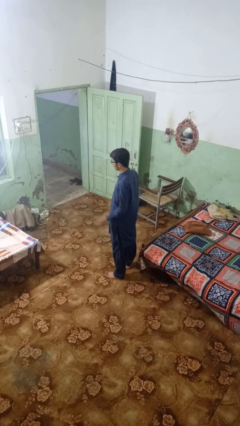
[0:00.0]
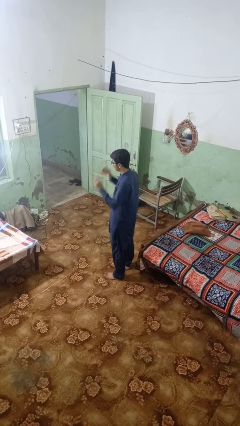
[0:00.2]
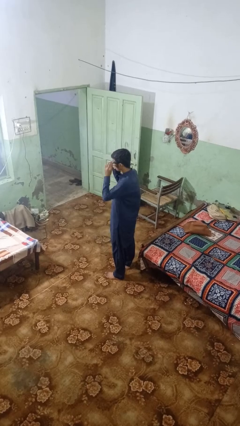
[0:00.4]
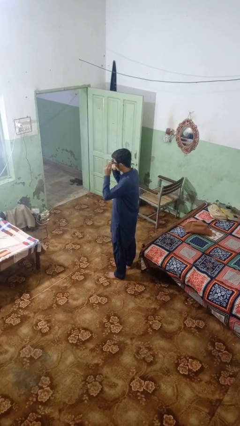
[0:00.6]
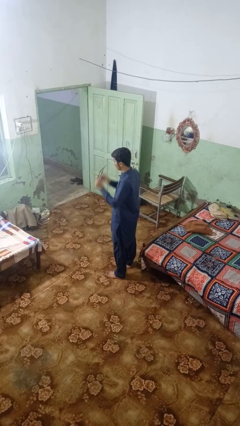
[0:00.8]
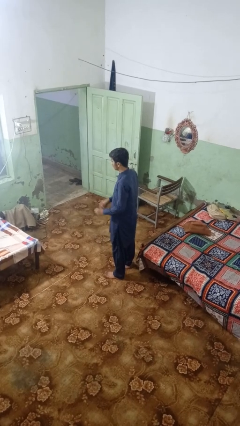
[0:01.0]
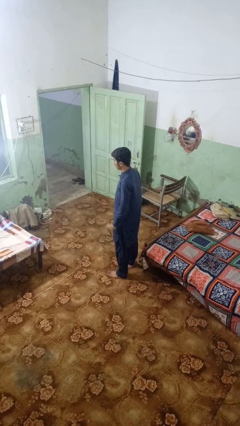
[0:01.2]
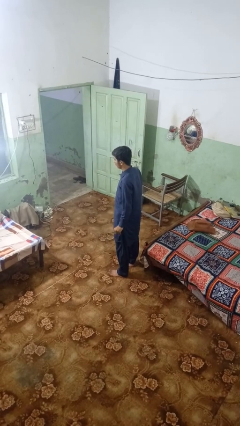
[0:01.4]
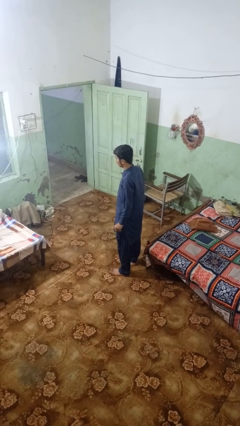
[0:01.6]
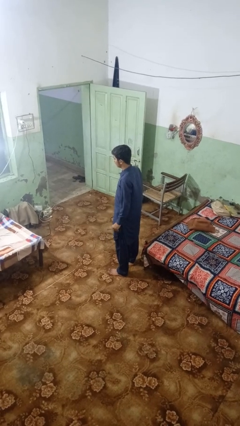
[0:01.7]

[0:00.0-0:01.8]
person takes off glasses

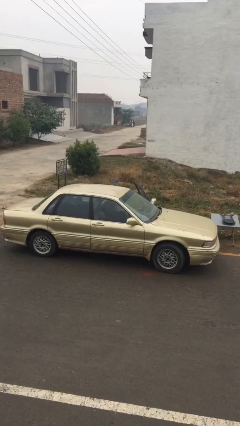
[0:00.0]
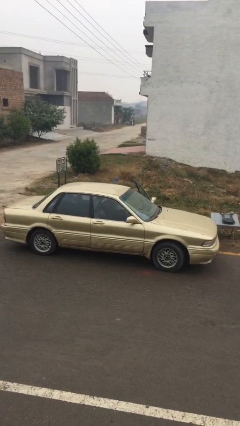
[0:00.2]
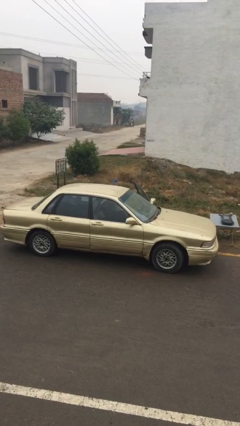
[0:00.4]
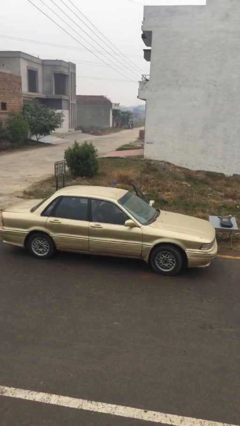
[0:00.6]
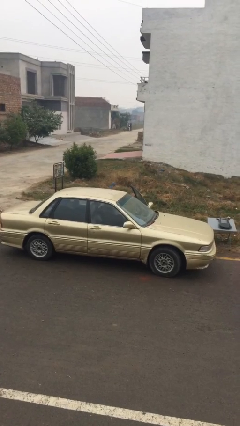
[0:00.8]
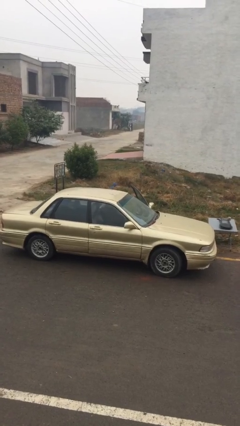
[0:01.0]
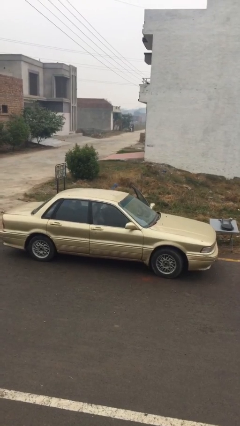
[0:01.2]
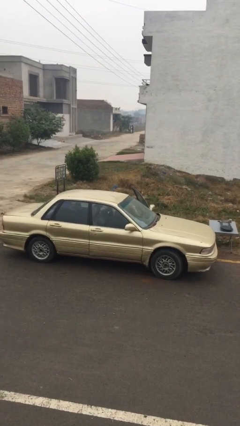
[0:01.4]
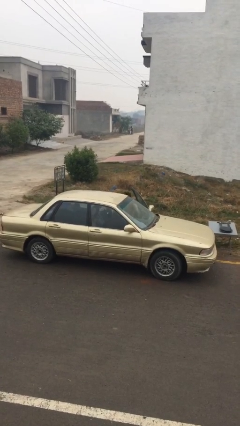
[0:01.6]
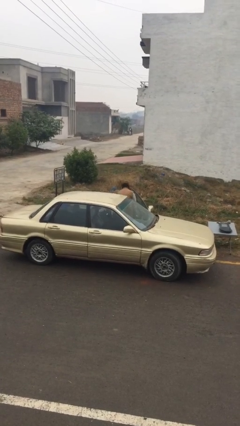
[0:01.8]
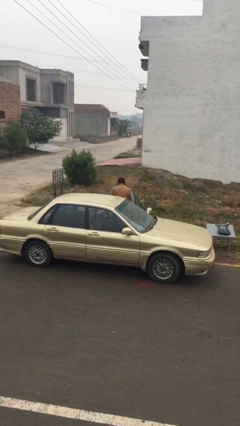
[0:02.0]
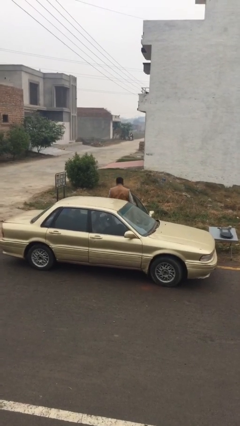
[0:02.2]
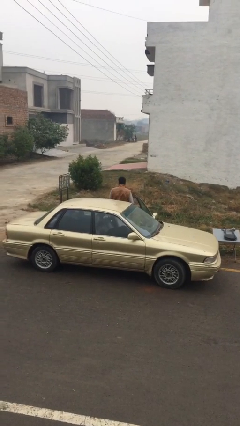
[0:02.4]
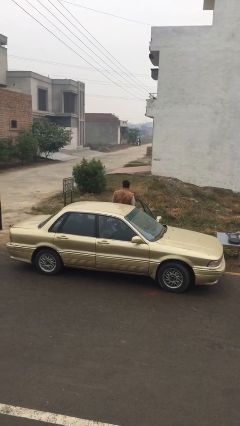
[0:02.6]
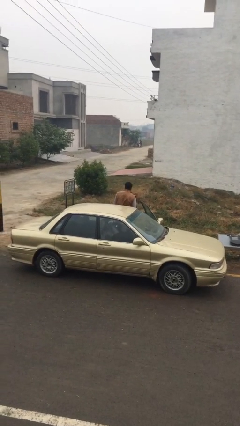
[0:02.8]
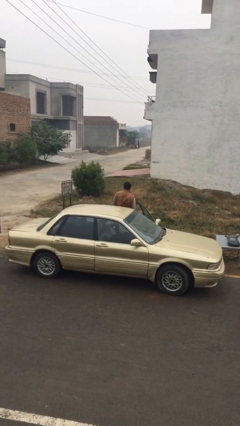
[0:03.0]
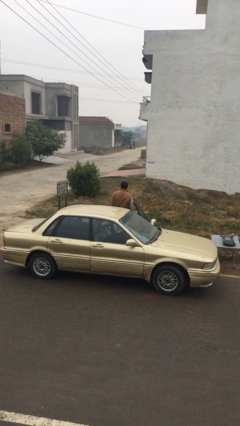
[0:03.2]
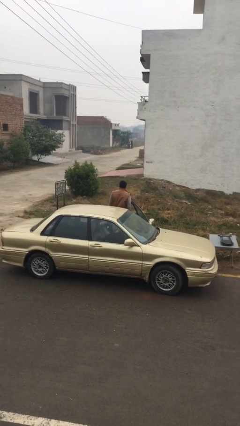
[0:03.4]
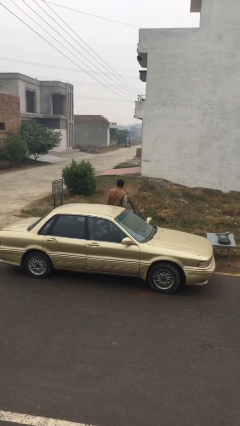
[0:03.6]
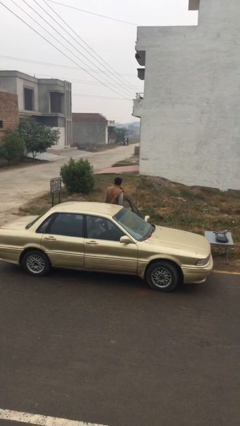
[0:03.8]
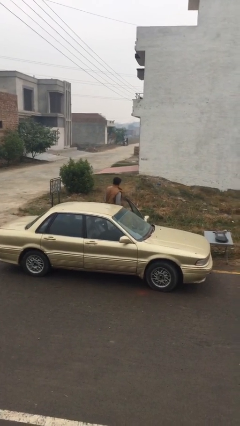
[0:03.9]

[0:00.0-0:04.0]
person exits car

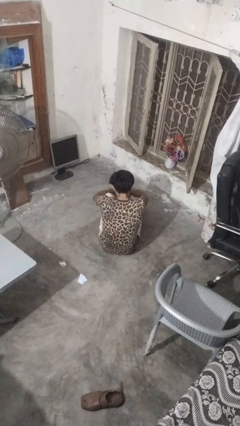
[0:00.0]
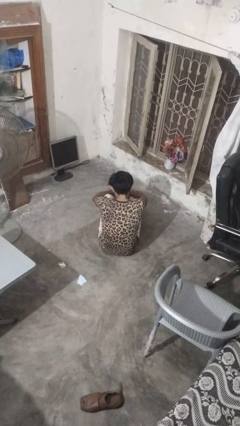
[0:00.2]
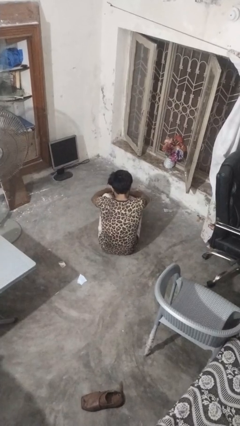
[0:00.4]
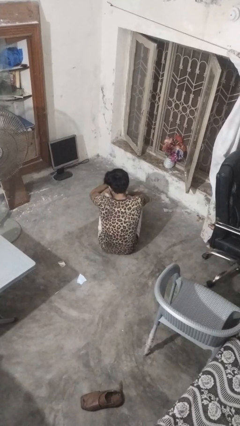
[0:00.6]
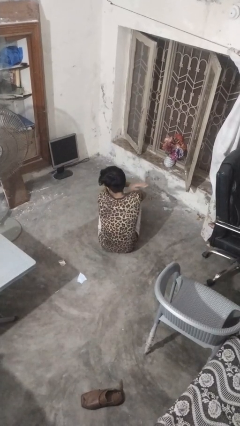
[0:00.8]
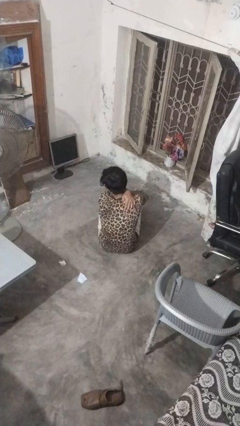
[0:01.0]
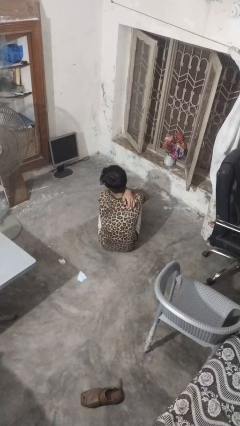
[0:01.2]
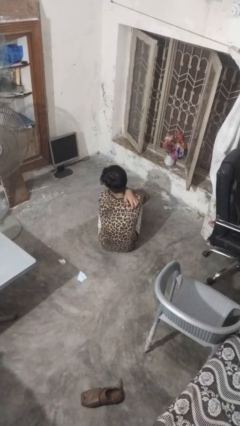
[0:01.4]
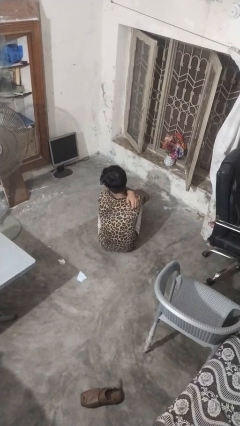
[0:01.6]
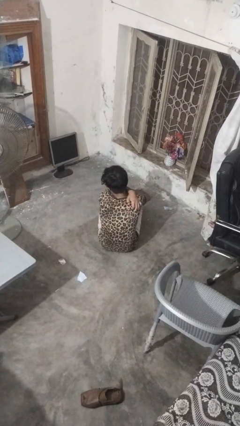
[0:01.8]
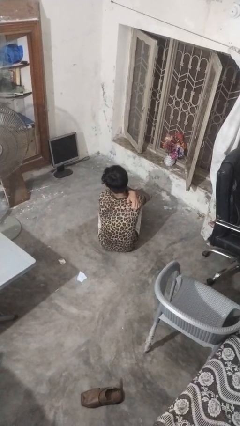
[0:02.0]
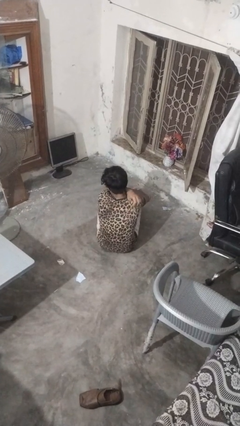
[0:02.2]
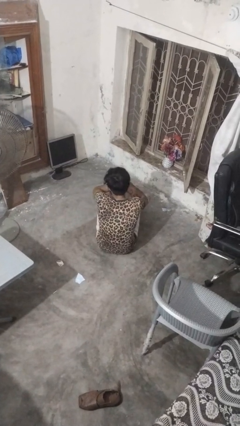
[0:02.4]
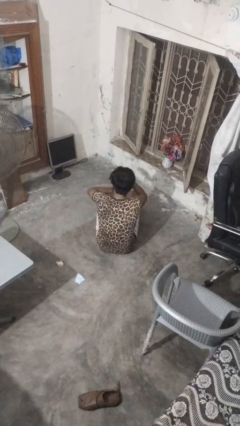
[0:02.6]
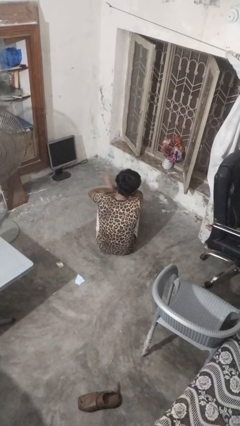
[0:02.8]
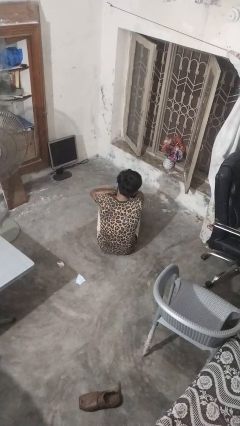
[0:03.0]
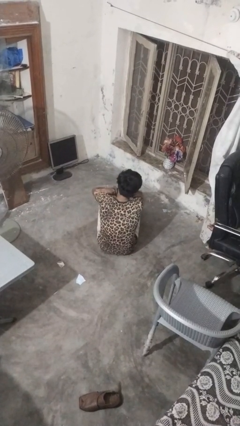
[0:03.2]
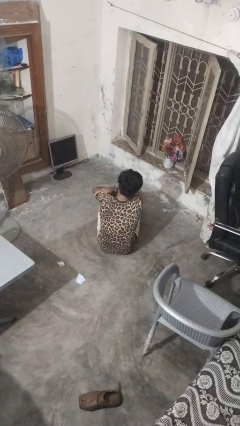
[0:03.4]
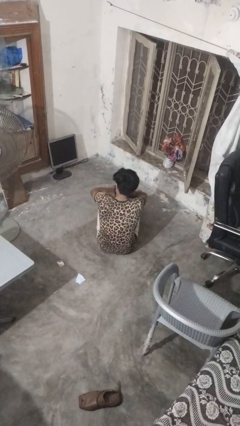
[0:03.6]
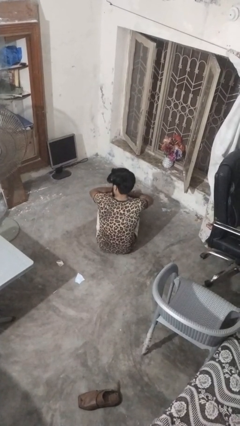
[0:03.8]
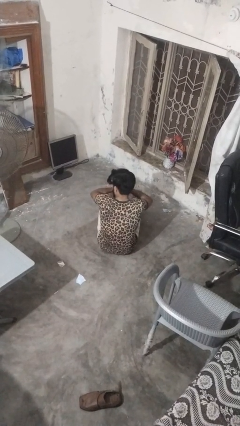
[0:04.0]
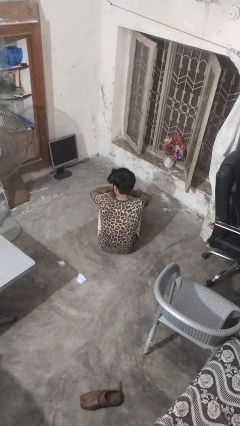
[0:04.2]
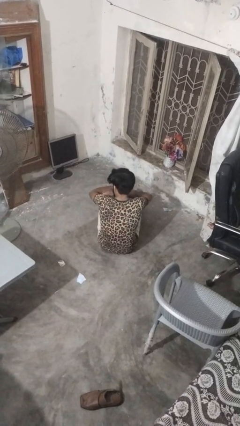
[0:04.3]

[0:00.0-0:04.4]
person swats bug

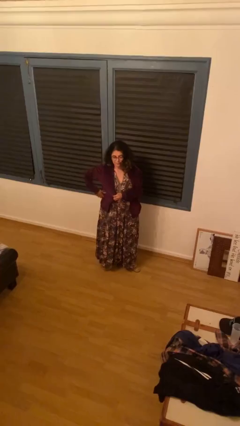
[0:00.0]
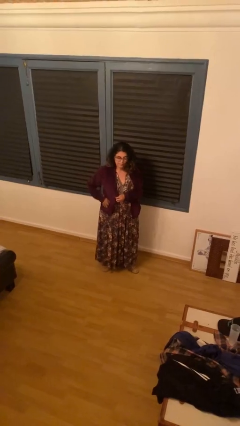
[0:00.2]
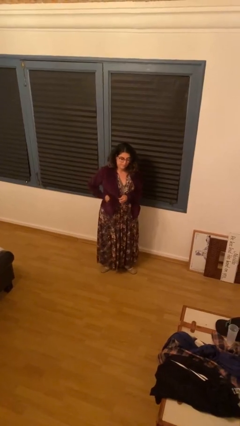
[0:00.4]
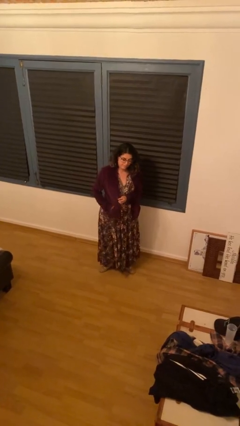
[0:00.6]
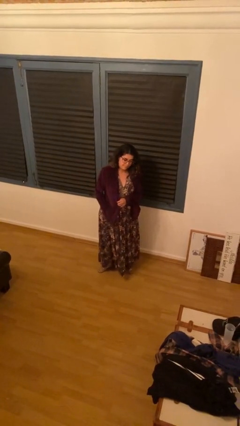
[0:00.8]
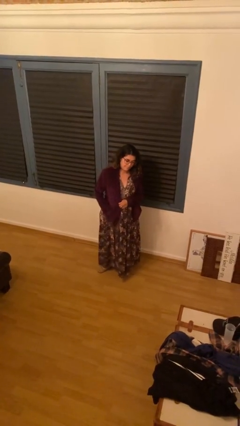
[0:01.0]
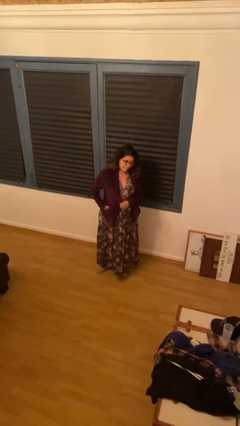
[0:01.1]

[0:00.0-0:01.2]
person puts phone into pocket

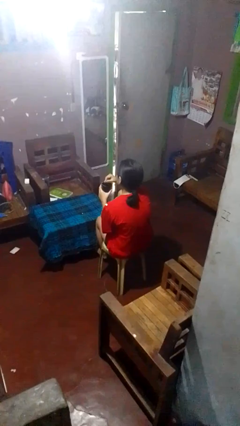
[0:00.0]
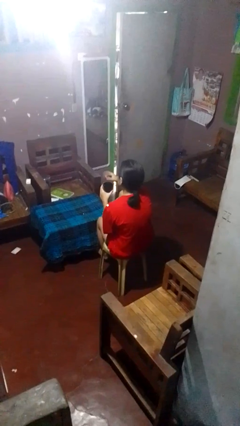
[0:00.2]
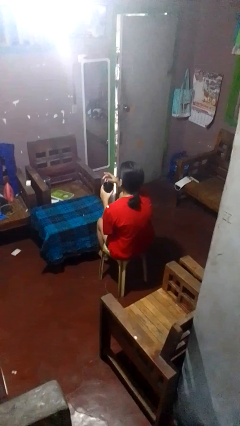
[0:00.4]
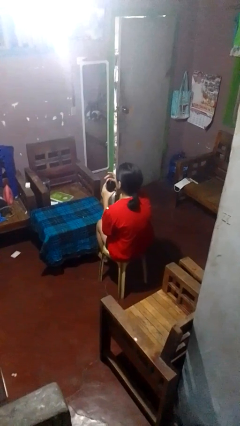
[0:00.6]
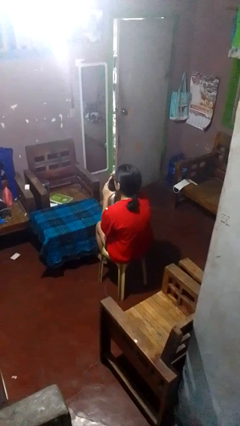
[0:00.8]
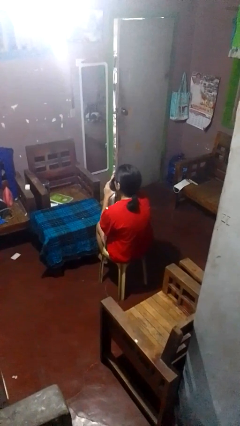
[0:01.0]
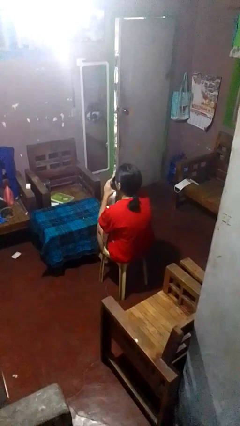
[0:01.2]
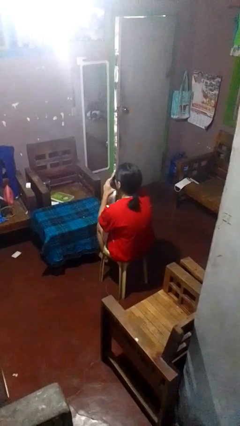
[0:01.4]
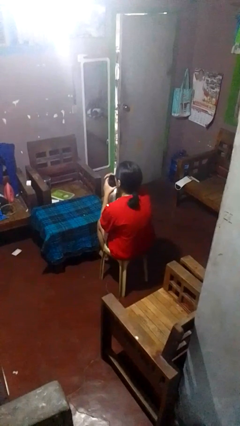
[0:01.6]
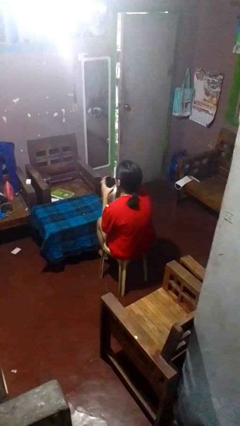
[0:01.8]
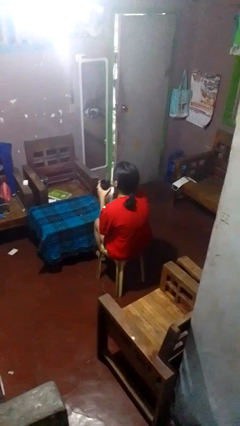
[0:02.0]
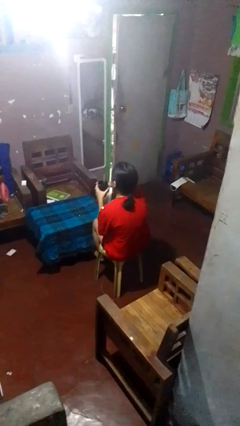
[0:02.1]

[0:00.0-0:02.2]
person drinks from mug

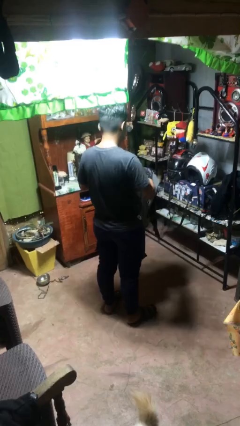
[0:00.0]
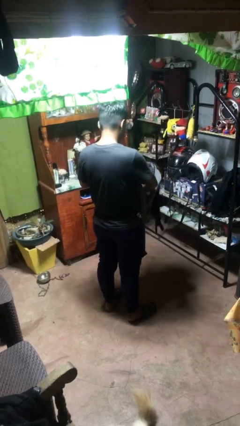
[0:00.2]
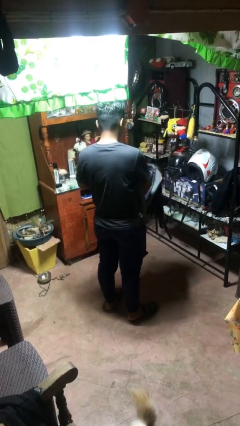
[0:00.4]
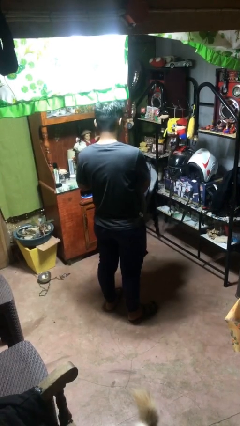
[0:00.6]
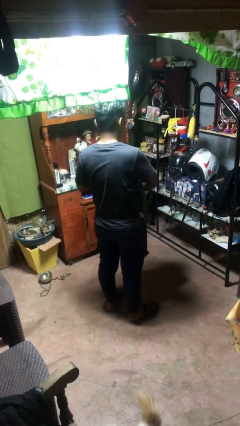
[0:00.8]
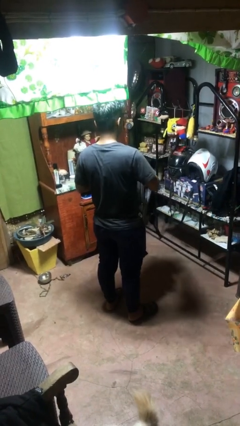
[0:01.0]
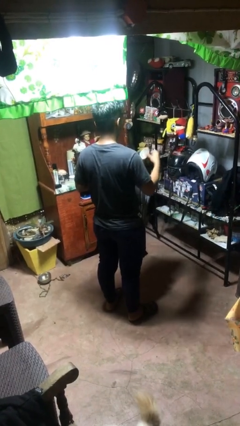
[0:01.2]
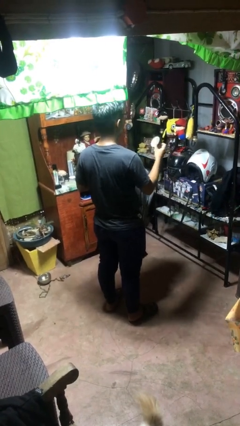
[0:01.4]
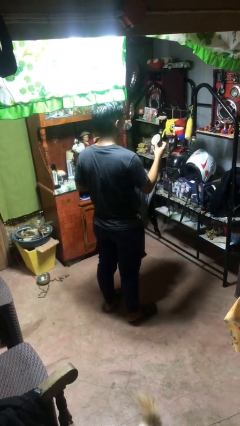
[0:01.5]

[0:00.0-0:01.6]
person takes object from bag

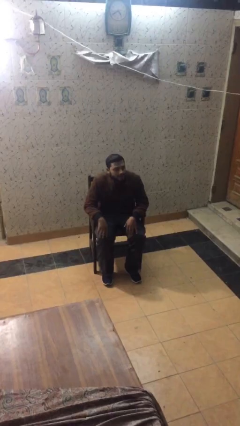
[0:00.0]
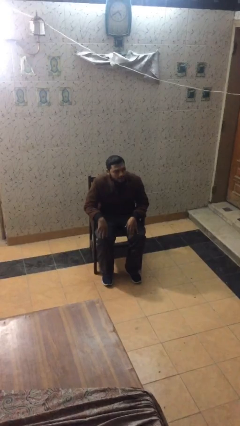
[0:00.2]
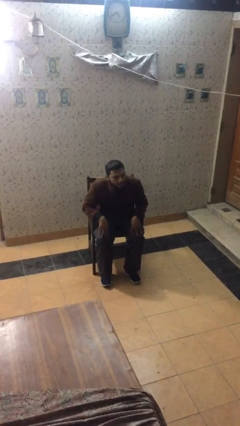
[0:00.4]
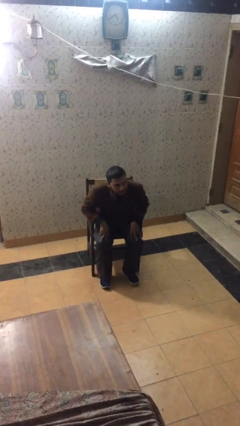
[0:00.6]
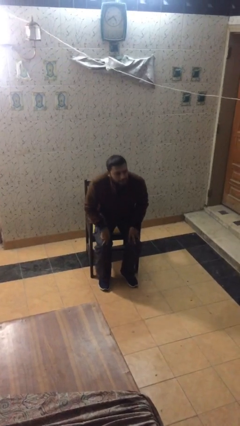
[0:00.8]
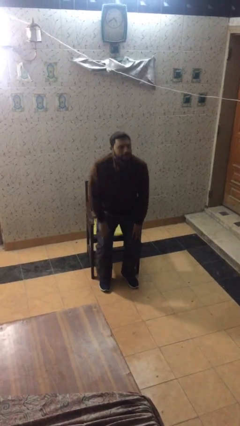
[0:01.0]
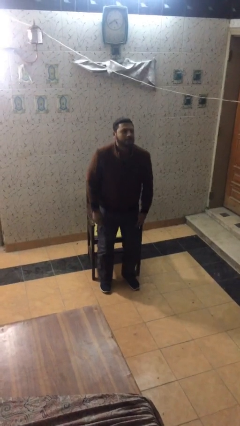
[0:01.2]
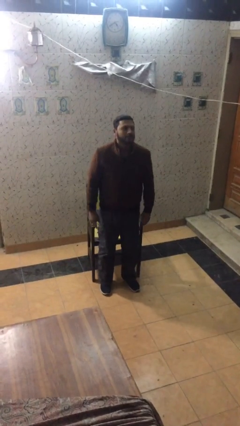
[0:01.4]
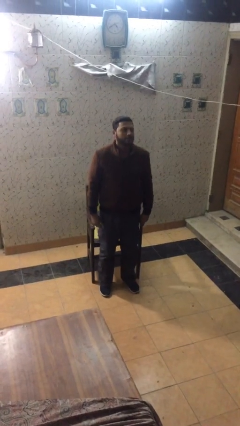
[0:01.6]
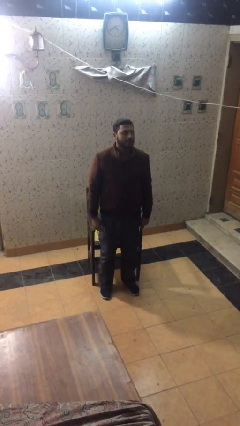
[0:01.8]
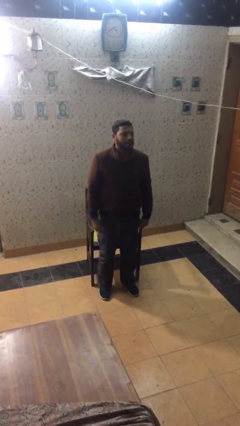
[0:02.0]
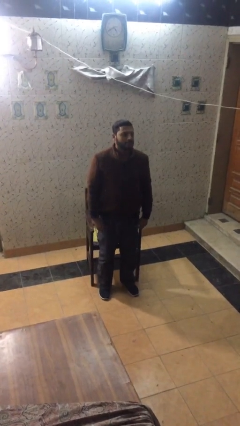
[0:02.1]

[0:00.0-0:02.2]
person stands up
